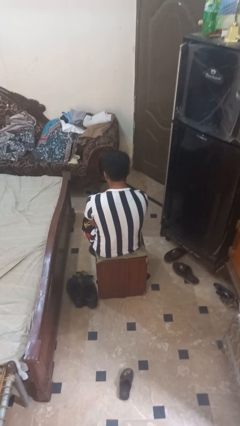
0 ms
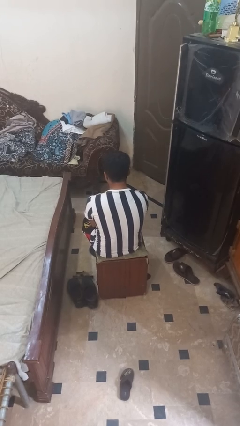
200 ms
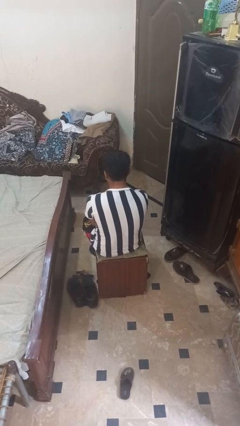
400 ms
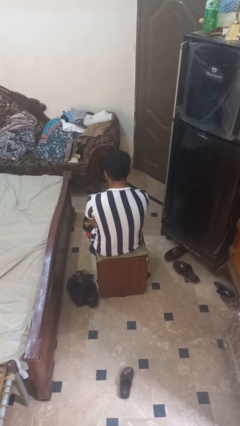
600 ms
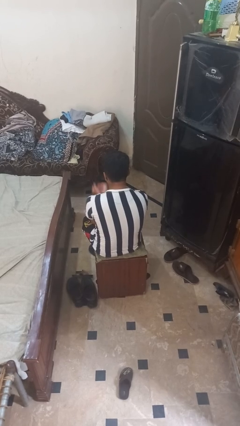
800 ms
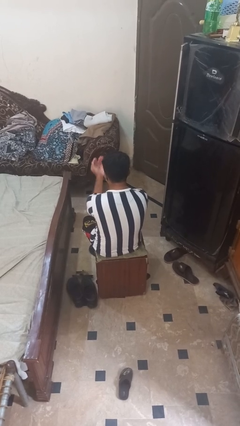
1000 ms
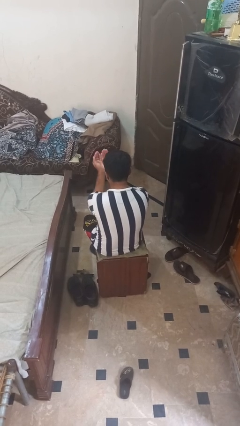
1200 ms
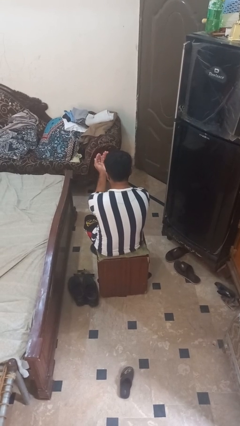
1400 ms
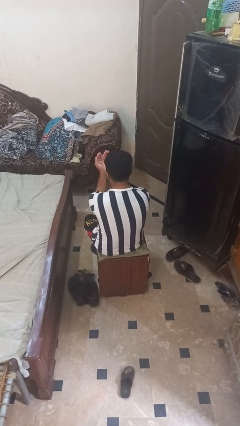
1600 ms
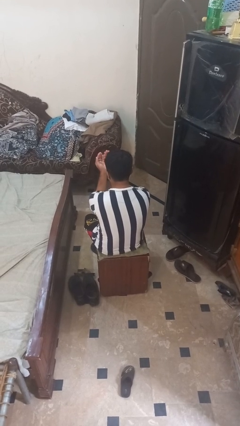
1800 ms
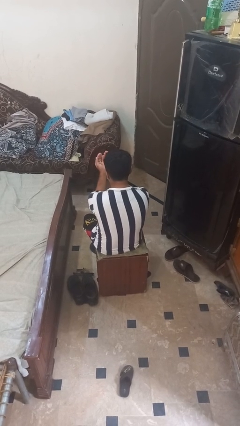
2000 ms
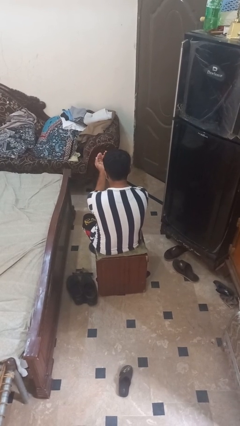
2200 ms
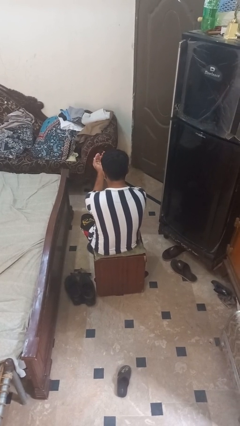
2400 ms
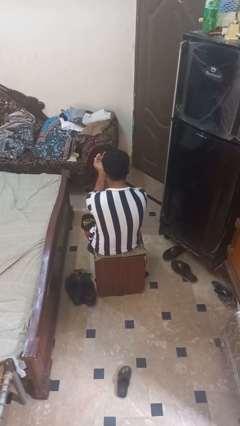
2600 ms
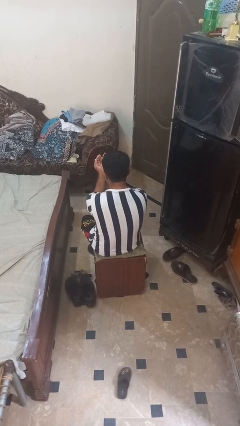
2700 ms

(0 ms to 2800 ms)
person prays

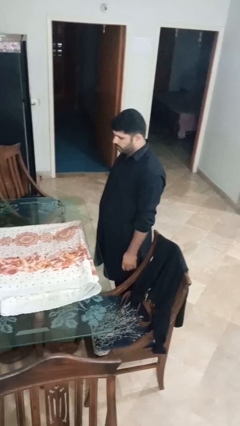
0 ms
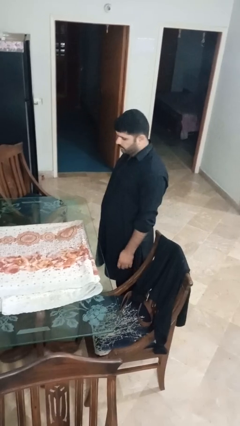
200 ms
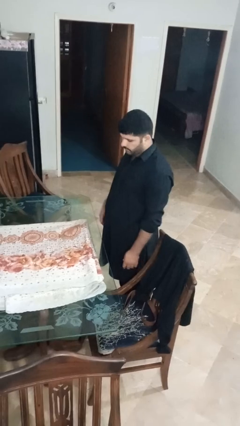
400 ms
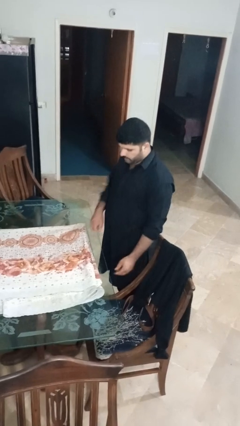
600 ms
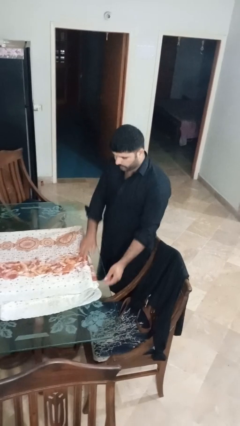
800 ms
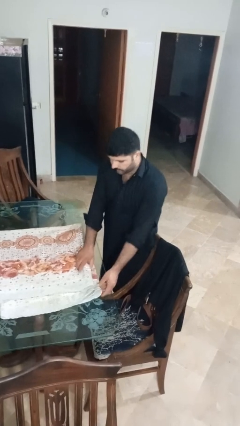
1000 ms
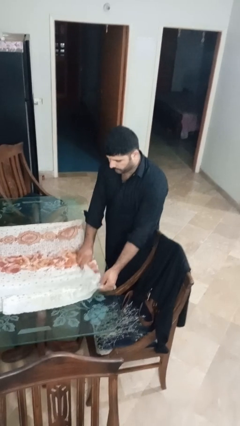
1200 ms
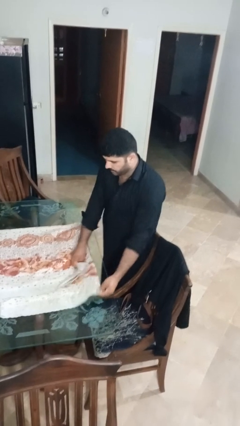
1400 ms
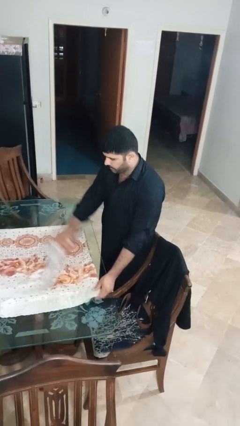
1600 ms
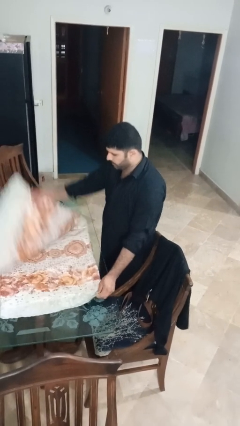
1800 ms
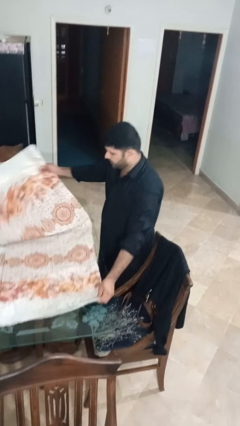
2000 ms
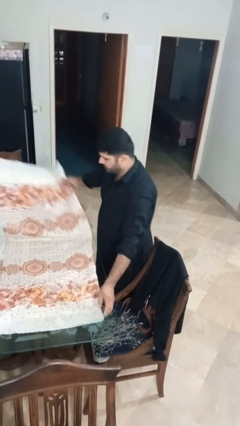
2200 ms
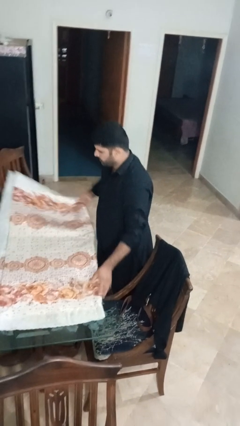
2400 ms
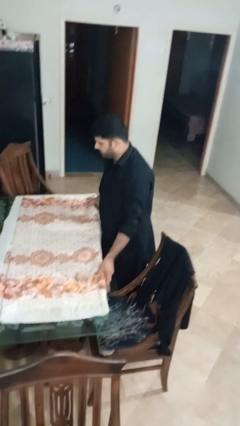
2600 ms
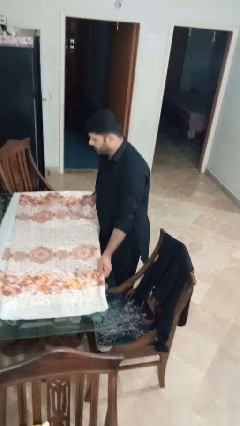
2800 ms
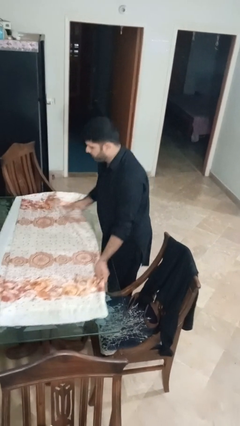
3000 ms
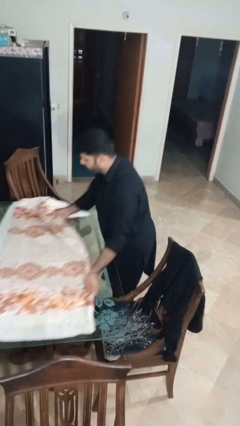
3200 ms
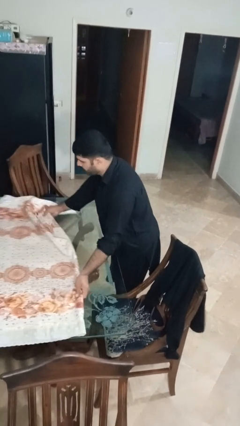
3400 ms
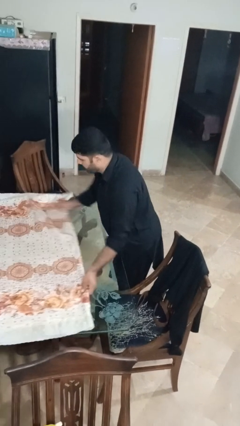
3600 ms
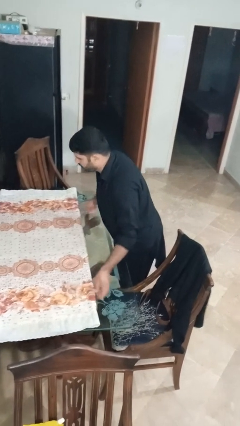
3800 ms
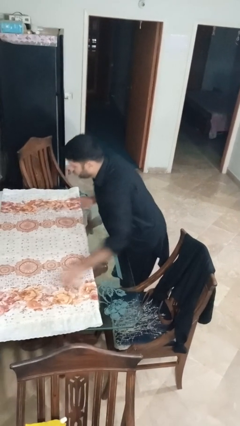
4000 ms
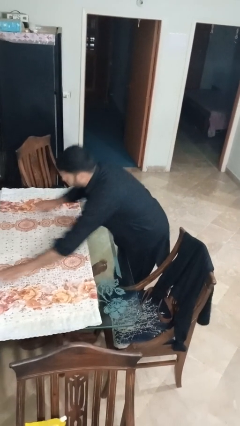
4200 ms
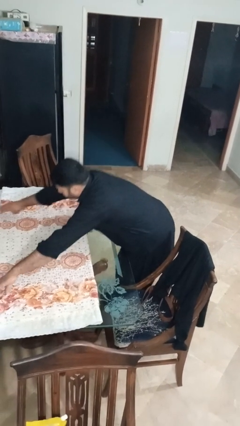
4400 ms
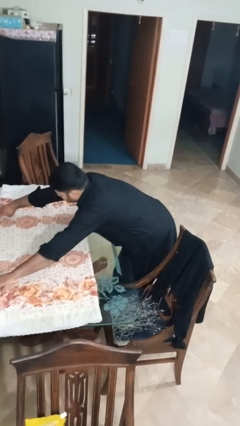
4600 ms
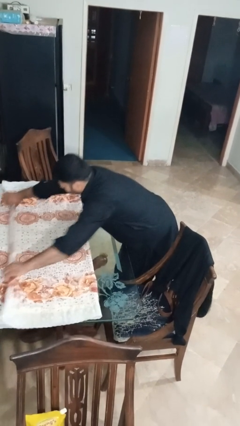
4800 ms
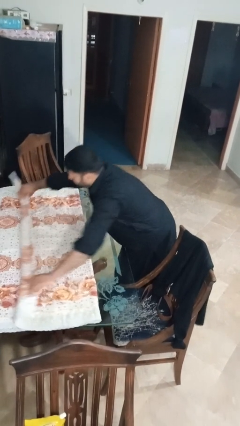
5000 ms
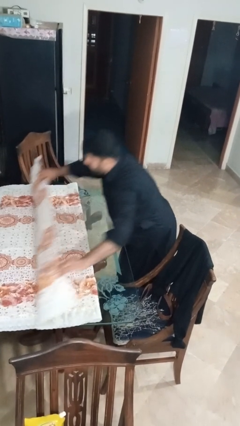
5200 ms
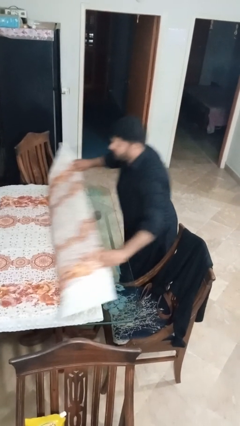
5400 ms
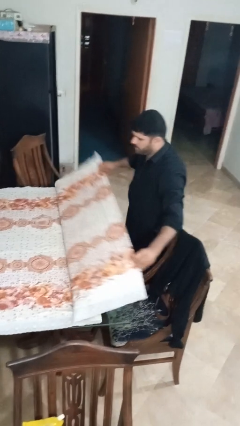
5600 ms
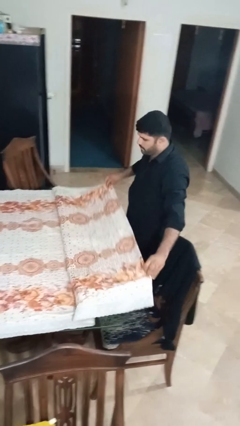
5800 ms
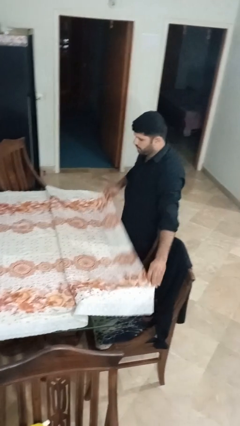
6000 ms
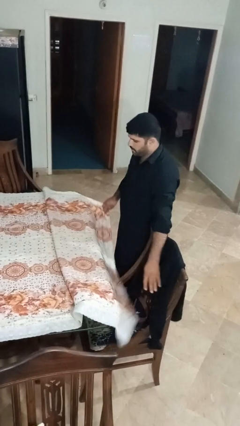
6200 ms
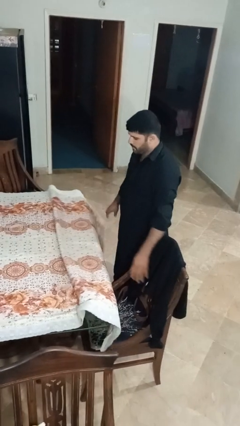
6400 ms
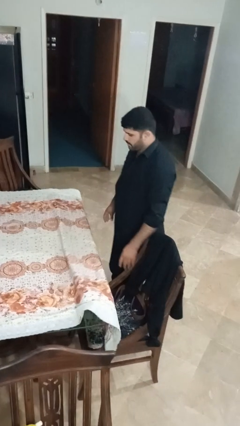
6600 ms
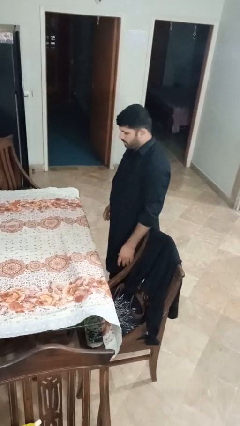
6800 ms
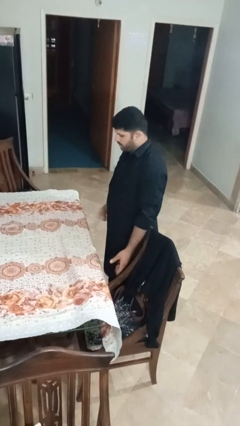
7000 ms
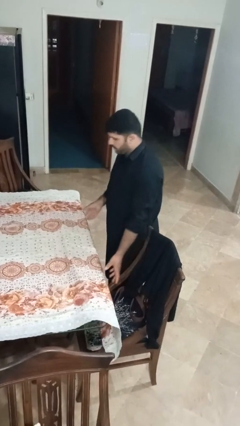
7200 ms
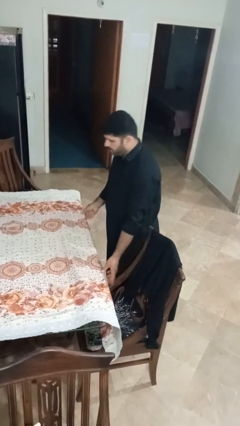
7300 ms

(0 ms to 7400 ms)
person spreads tablecloth

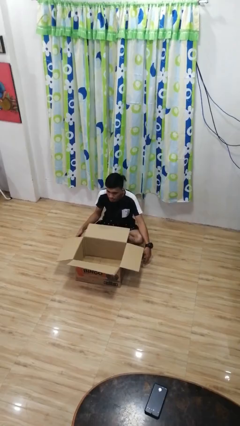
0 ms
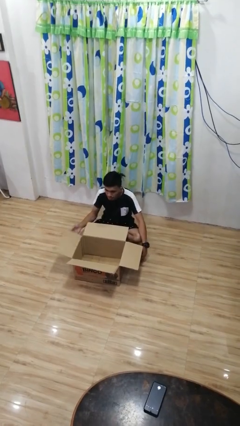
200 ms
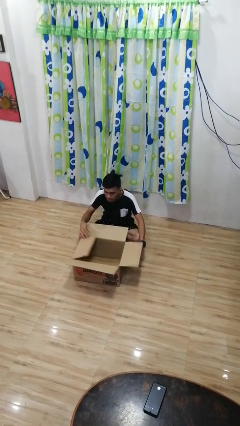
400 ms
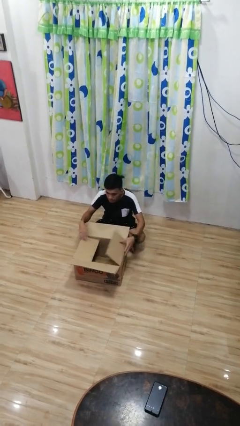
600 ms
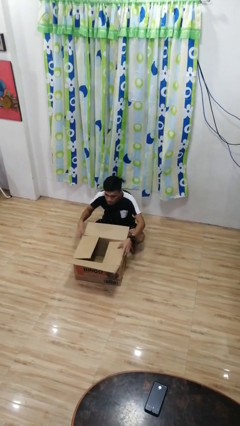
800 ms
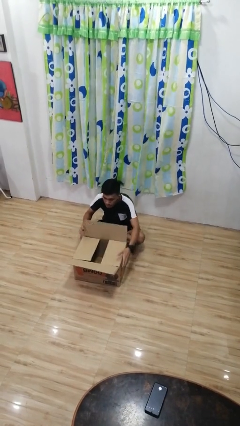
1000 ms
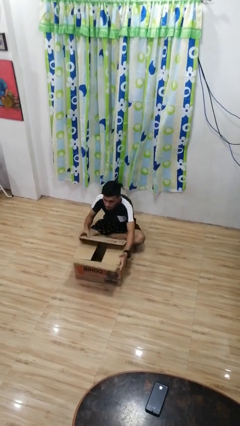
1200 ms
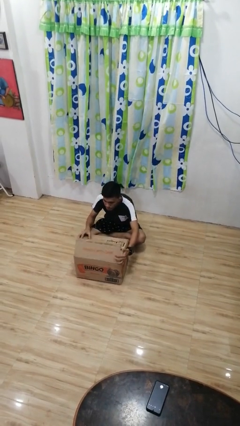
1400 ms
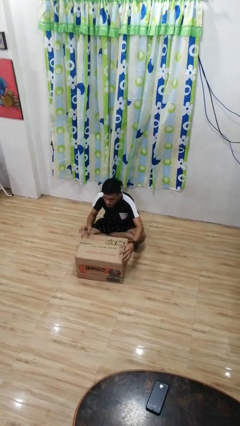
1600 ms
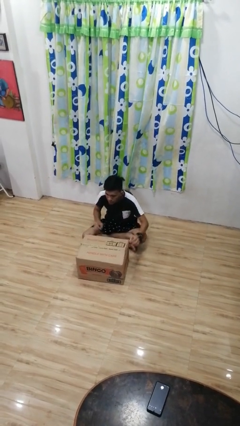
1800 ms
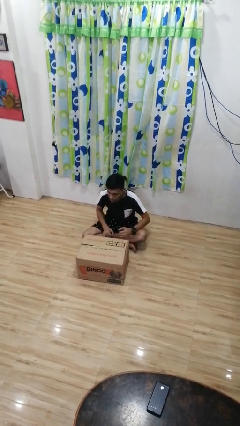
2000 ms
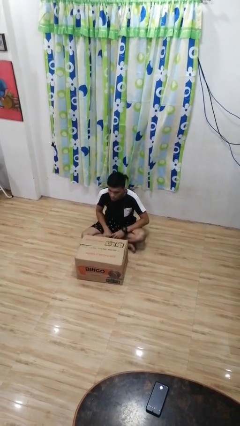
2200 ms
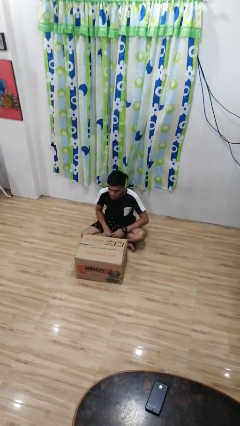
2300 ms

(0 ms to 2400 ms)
person closes box

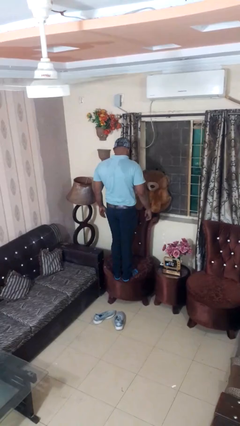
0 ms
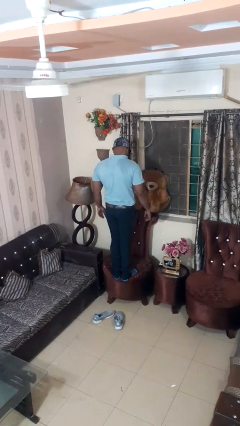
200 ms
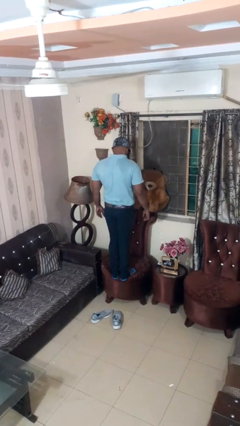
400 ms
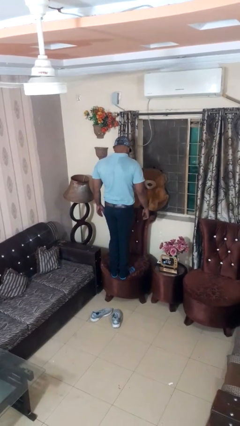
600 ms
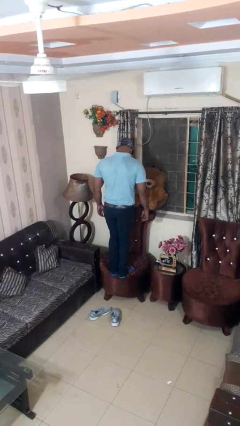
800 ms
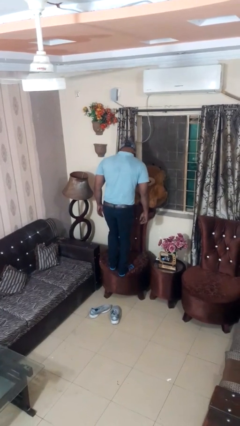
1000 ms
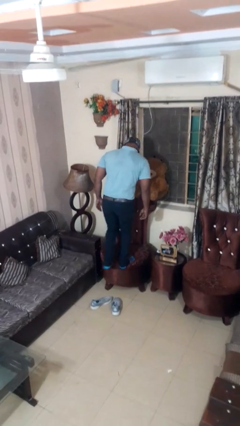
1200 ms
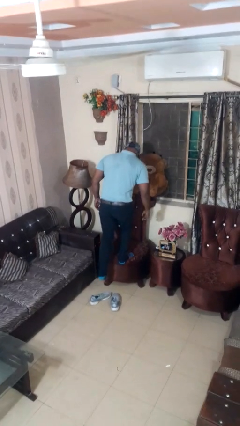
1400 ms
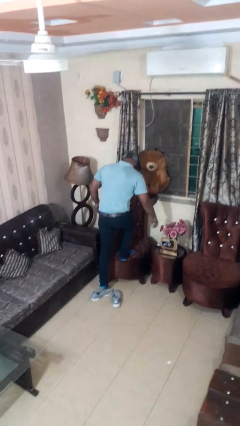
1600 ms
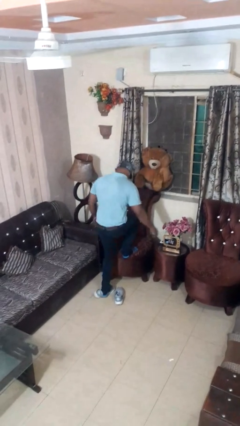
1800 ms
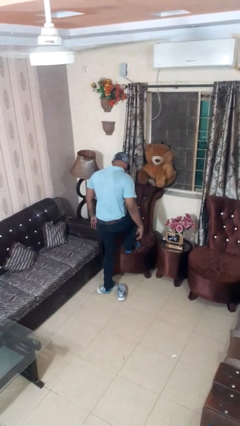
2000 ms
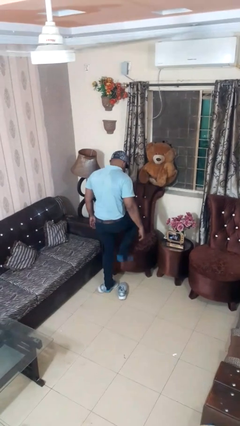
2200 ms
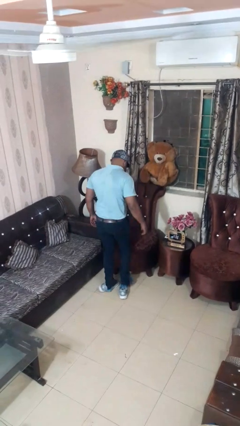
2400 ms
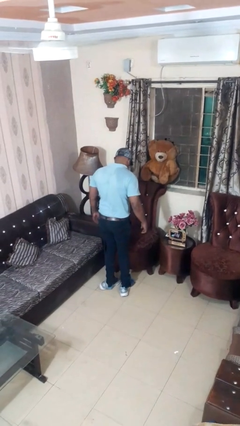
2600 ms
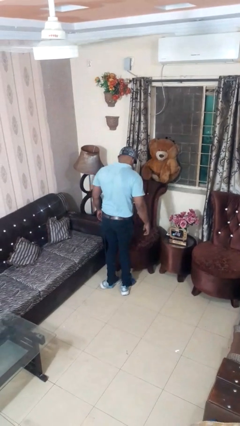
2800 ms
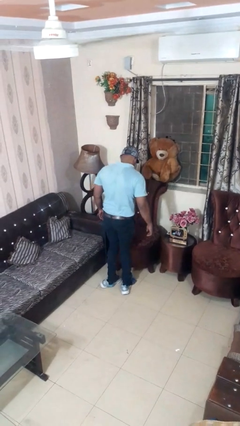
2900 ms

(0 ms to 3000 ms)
person climbs off chair

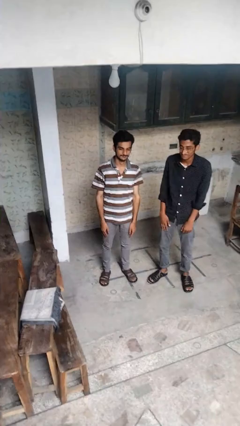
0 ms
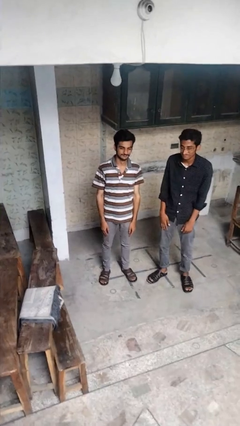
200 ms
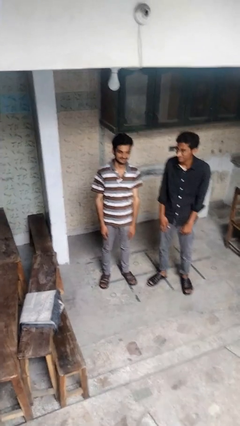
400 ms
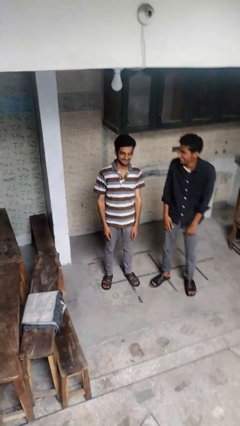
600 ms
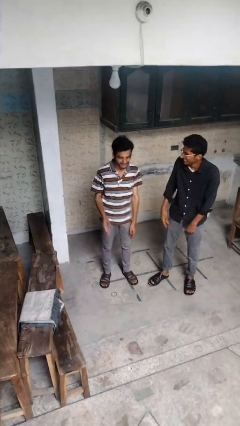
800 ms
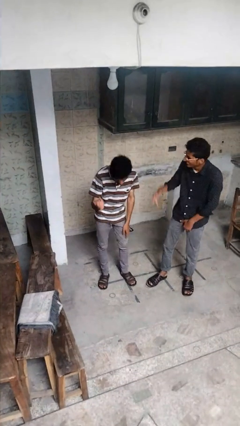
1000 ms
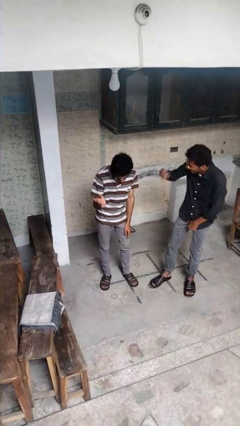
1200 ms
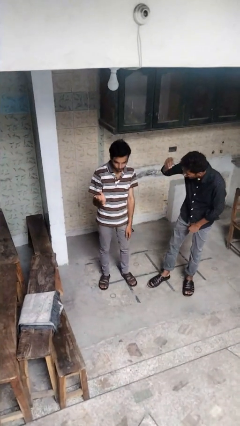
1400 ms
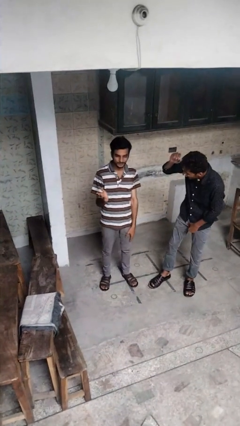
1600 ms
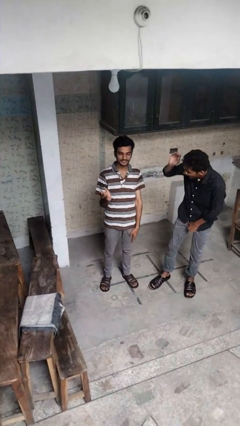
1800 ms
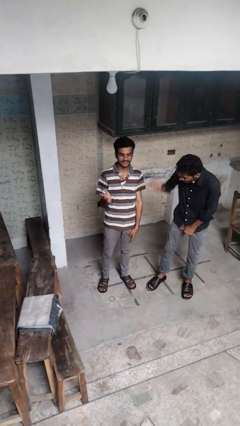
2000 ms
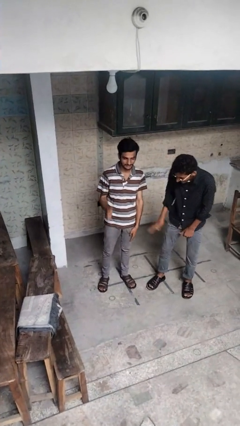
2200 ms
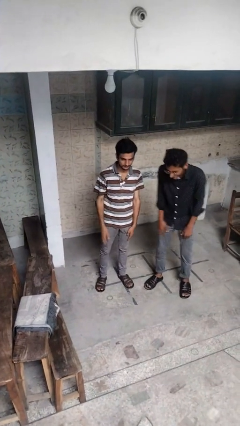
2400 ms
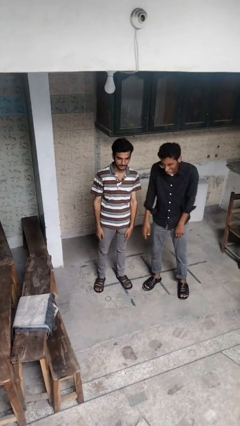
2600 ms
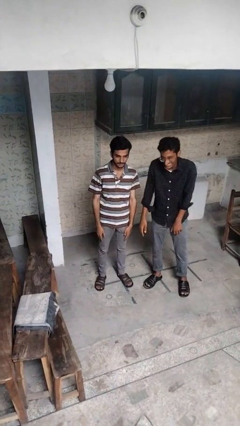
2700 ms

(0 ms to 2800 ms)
person laughs with person
